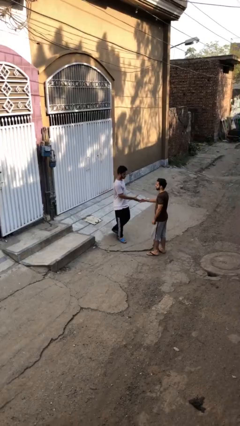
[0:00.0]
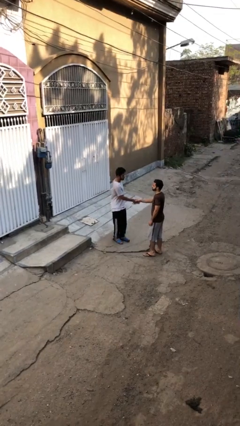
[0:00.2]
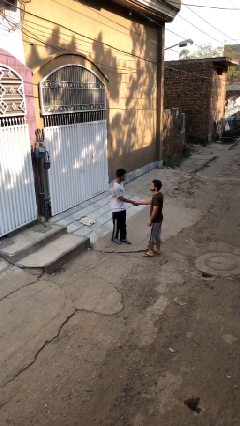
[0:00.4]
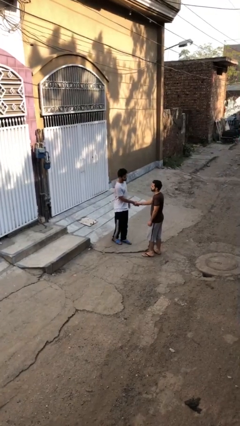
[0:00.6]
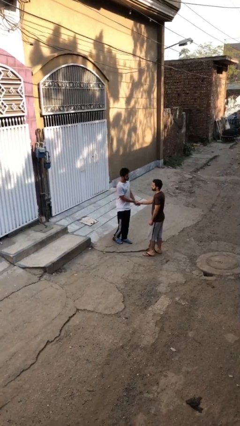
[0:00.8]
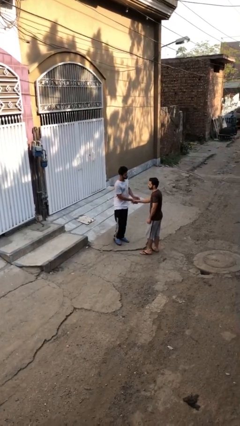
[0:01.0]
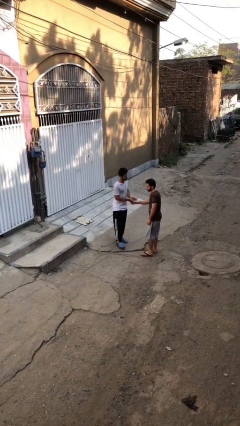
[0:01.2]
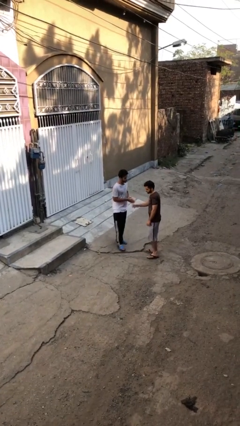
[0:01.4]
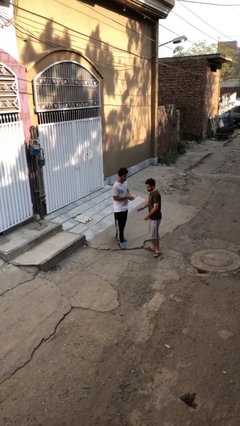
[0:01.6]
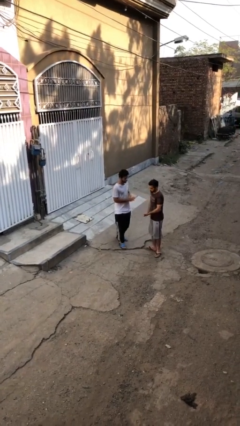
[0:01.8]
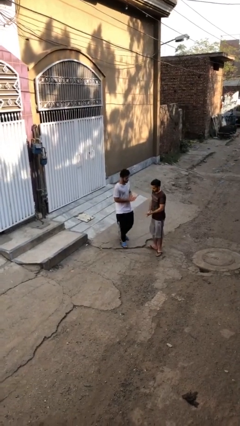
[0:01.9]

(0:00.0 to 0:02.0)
person shakes hand

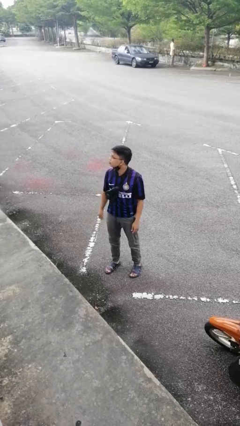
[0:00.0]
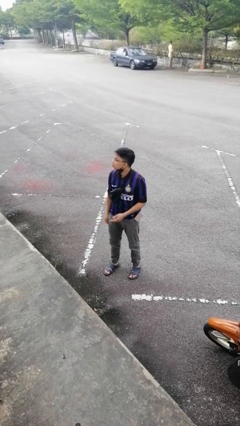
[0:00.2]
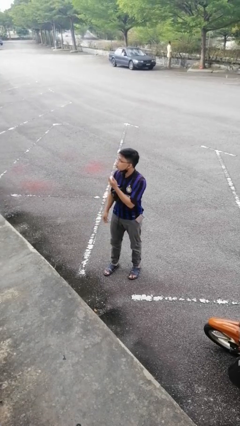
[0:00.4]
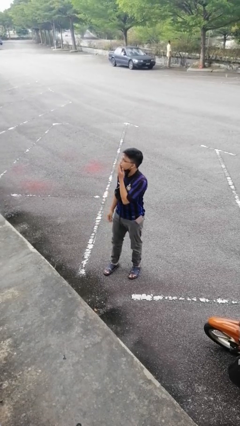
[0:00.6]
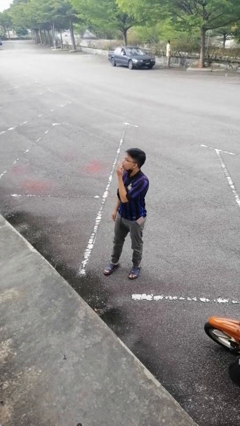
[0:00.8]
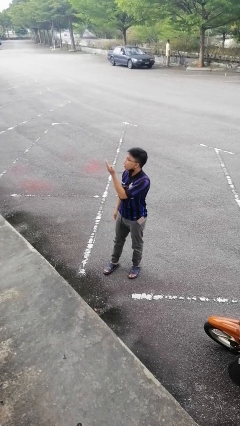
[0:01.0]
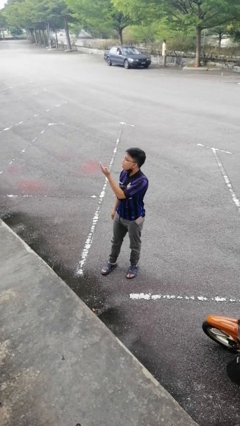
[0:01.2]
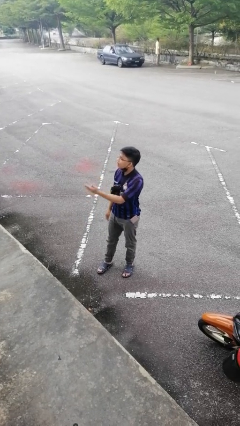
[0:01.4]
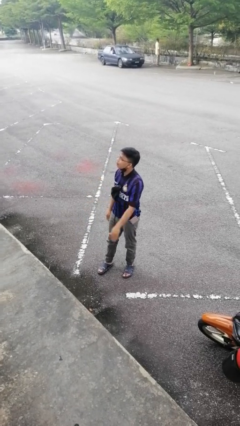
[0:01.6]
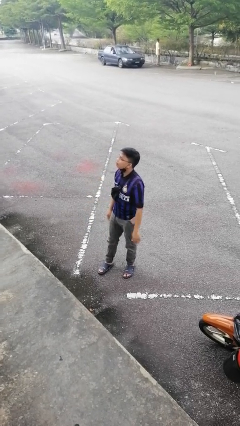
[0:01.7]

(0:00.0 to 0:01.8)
person gestures blow kiss

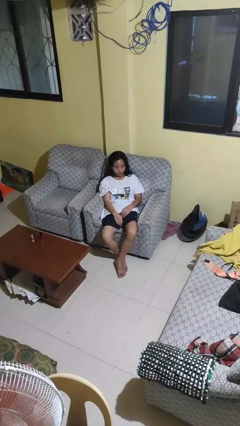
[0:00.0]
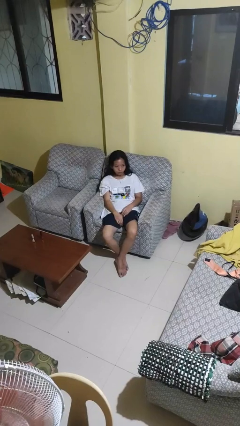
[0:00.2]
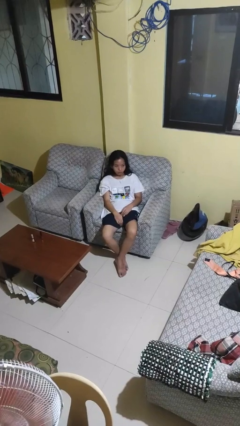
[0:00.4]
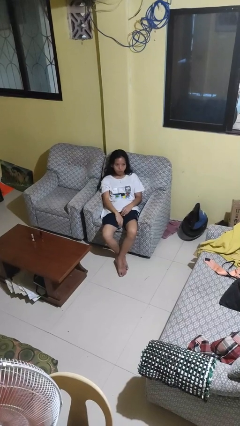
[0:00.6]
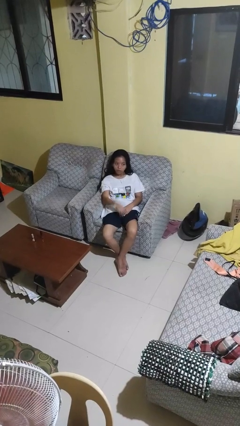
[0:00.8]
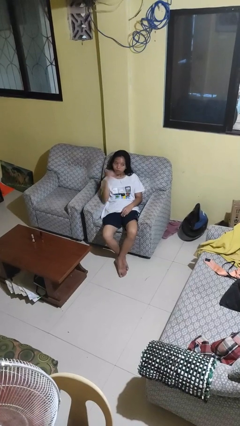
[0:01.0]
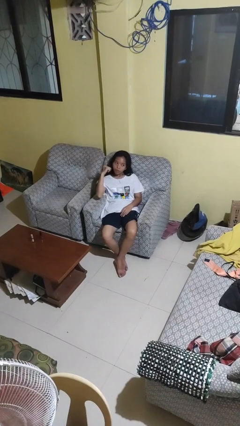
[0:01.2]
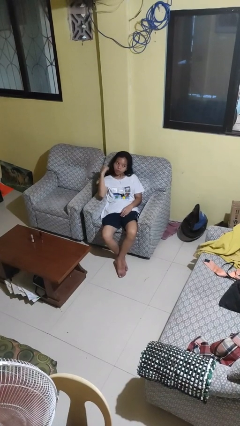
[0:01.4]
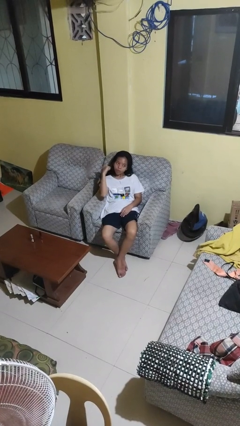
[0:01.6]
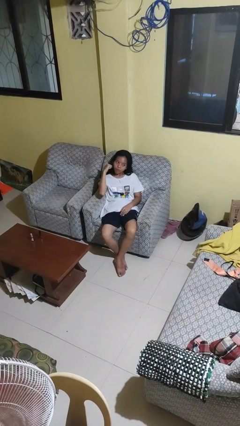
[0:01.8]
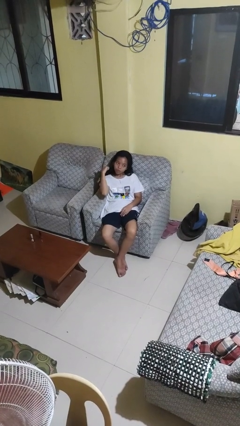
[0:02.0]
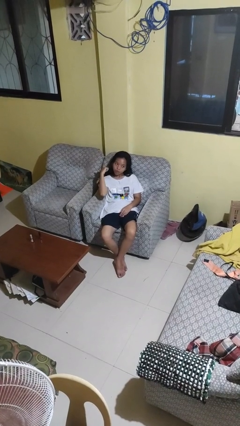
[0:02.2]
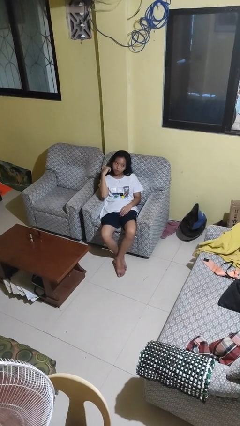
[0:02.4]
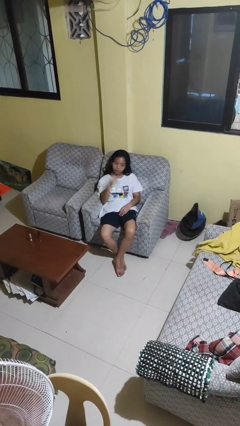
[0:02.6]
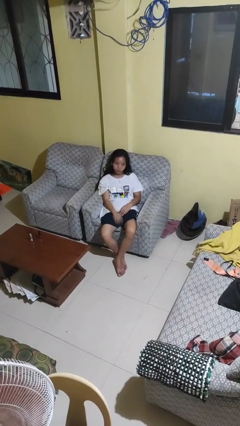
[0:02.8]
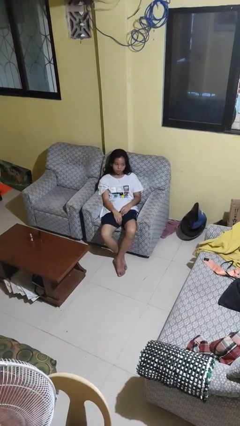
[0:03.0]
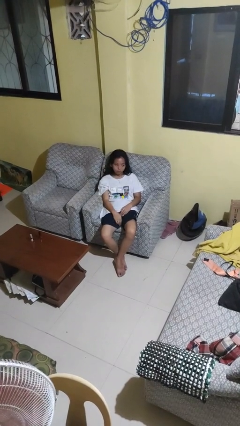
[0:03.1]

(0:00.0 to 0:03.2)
person gestures behind me

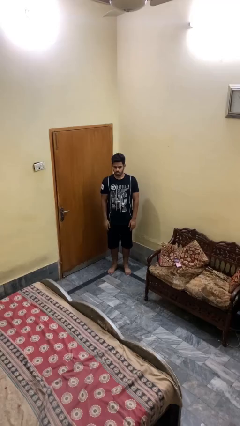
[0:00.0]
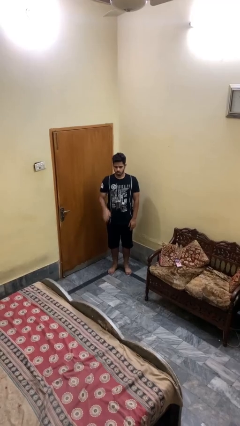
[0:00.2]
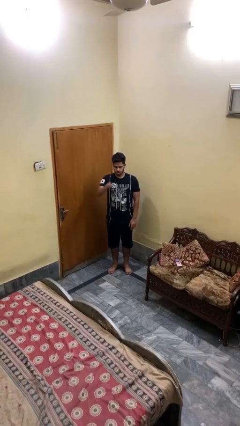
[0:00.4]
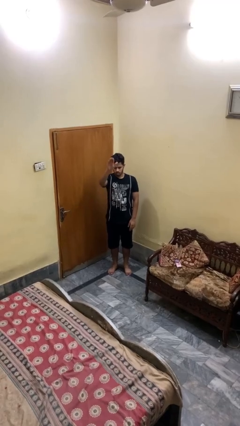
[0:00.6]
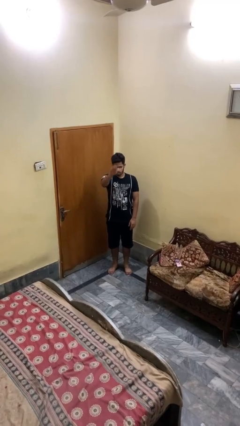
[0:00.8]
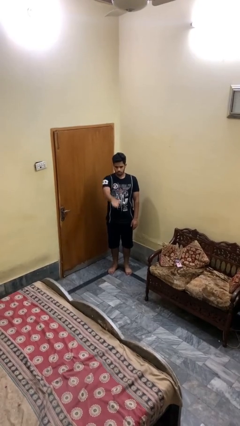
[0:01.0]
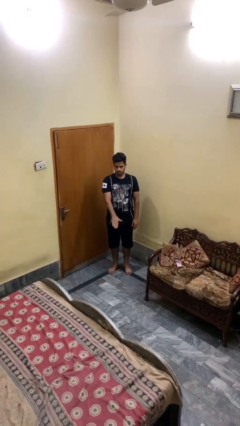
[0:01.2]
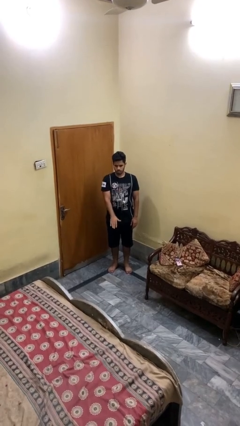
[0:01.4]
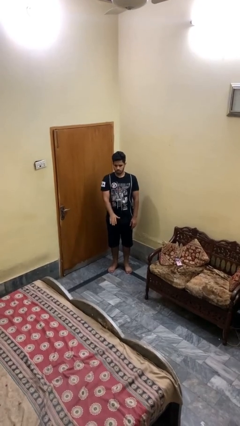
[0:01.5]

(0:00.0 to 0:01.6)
person gestures swipe down

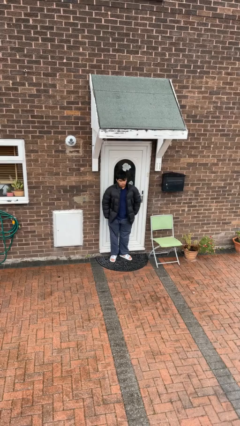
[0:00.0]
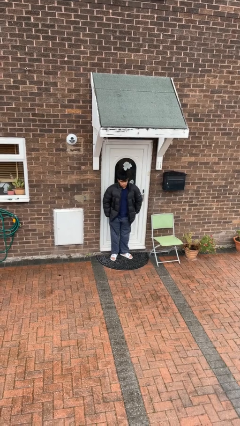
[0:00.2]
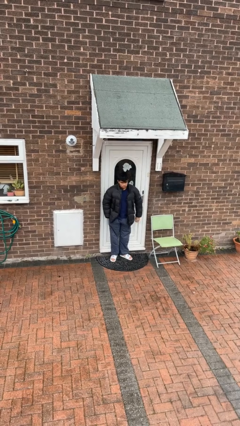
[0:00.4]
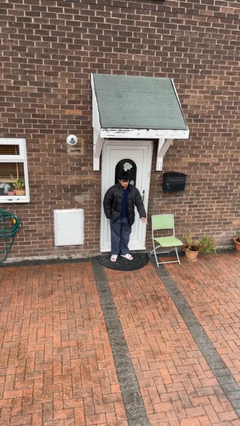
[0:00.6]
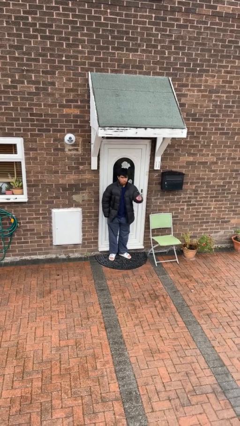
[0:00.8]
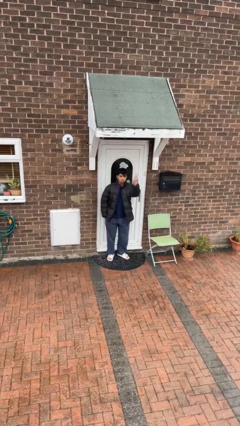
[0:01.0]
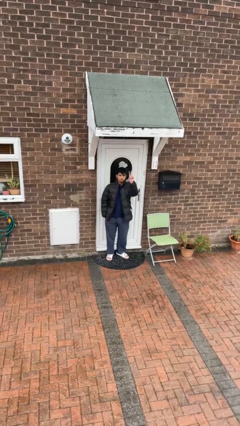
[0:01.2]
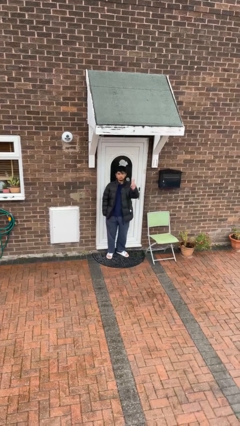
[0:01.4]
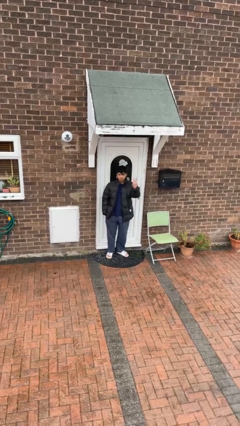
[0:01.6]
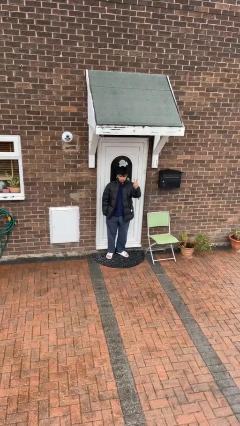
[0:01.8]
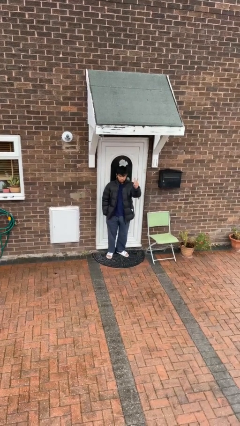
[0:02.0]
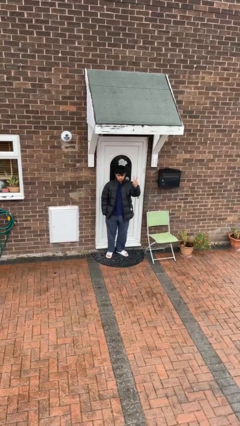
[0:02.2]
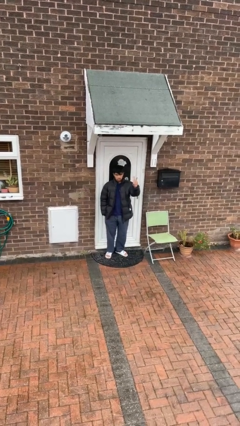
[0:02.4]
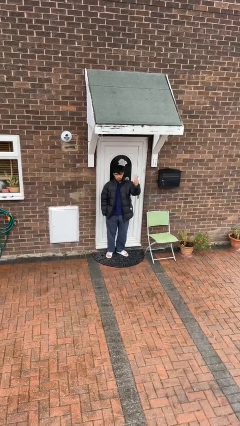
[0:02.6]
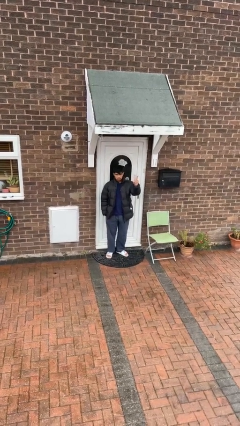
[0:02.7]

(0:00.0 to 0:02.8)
person gestures peace

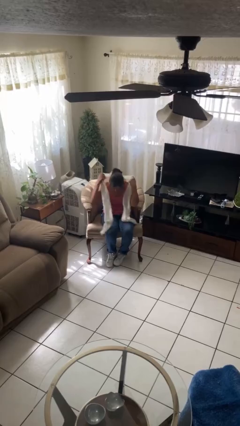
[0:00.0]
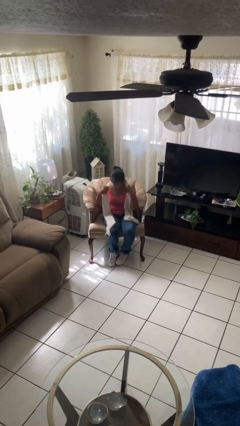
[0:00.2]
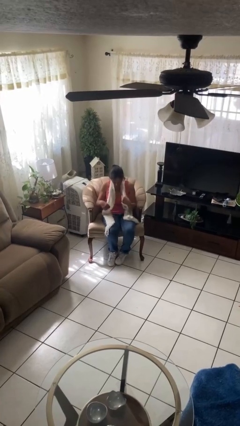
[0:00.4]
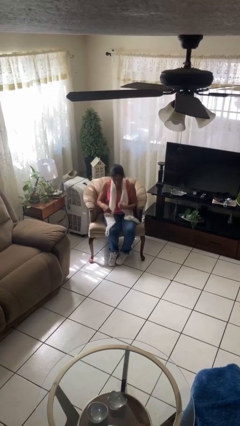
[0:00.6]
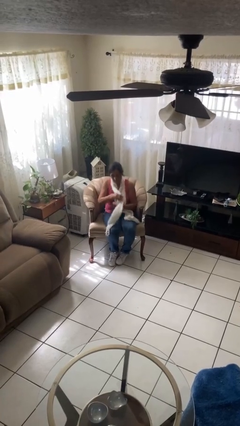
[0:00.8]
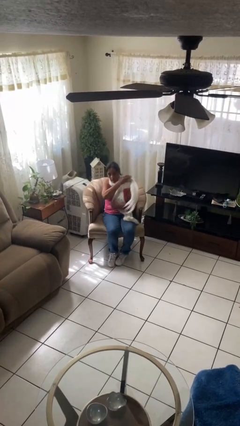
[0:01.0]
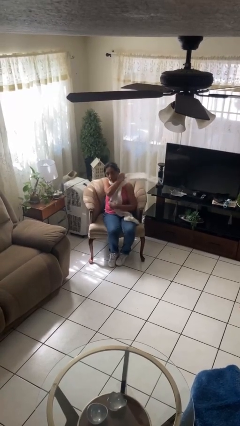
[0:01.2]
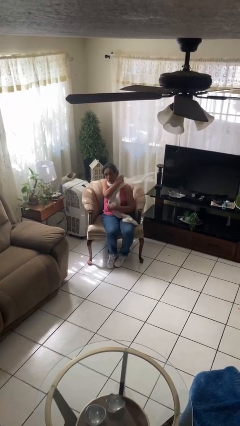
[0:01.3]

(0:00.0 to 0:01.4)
person puts on scarf

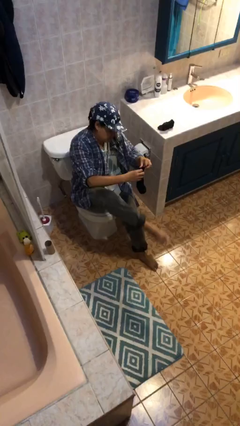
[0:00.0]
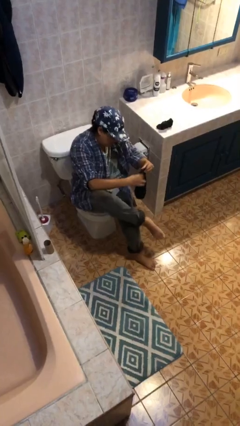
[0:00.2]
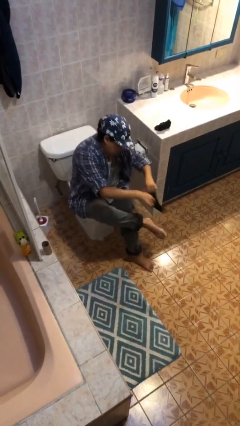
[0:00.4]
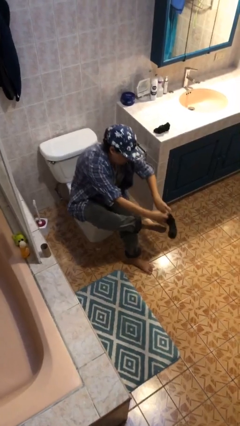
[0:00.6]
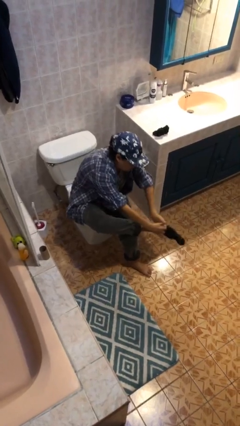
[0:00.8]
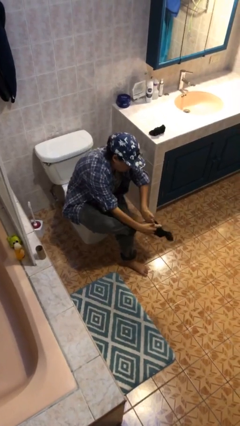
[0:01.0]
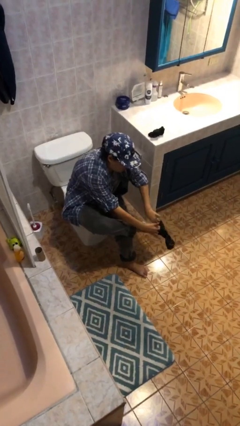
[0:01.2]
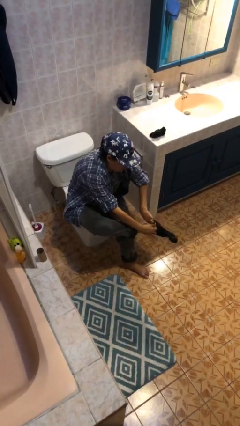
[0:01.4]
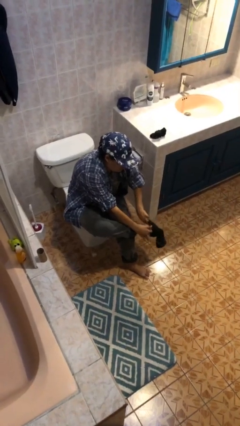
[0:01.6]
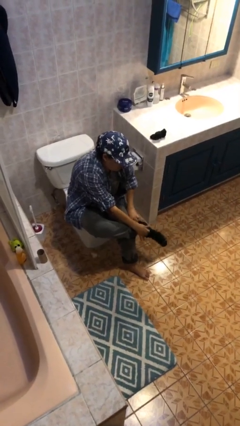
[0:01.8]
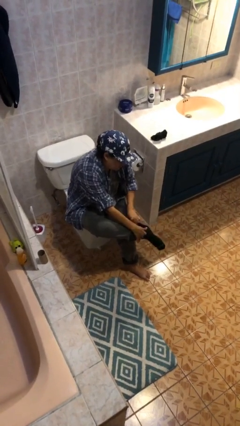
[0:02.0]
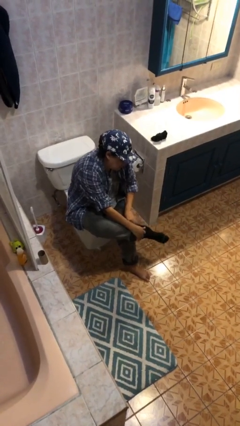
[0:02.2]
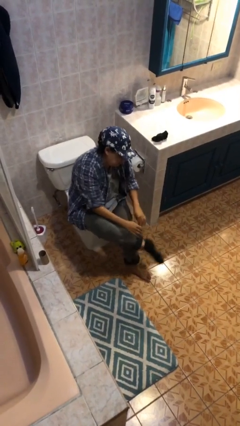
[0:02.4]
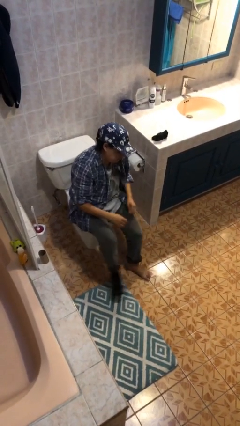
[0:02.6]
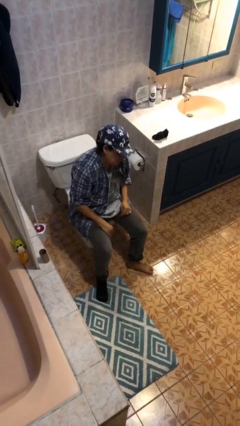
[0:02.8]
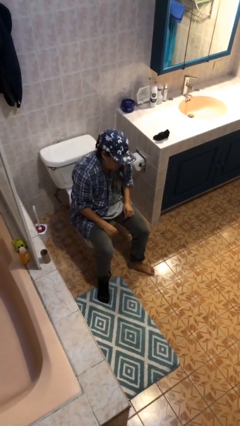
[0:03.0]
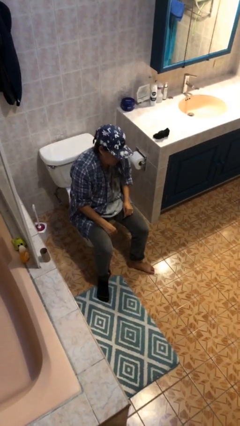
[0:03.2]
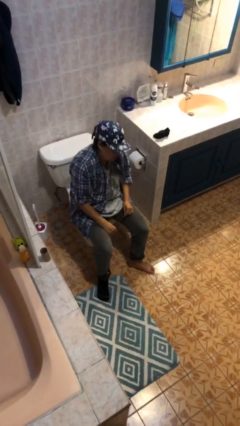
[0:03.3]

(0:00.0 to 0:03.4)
person puts on socks

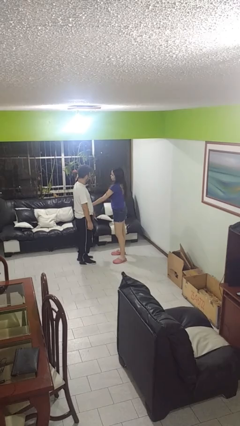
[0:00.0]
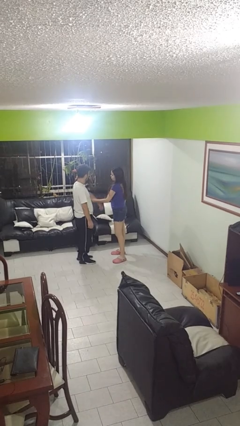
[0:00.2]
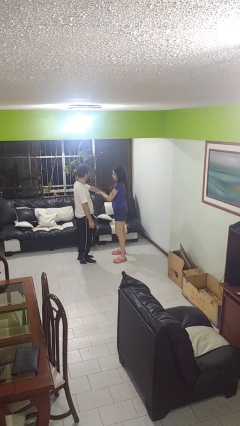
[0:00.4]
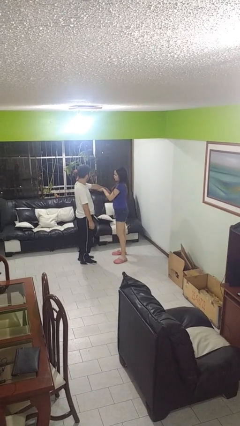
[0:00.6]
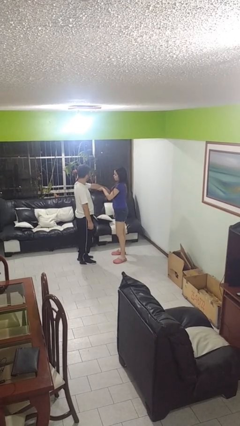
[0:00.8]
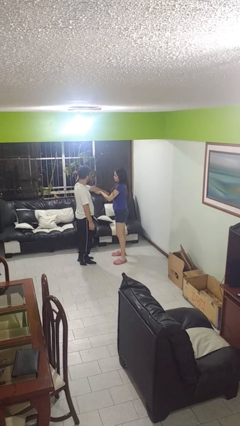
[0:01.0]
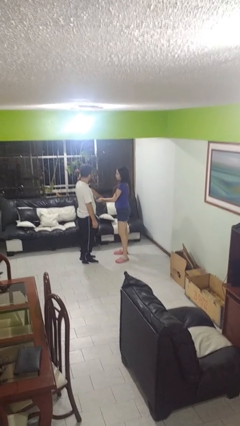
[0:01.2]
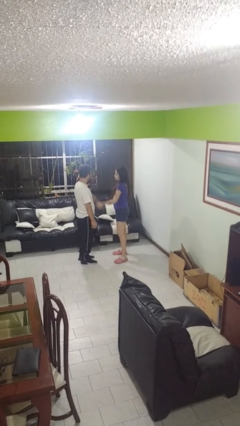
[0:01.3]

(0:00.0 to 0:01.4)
person grabs person by forearm
